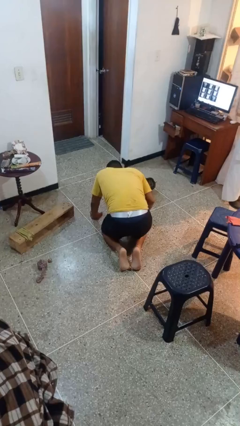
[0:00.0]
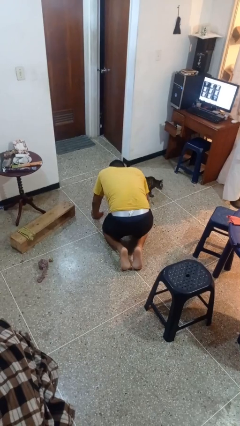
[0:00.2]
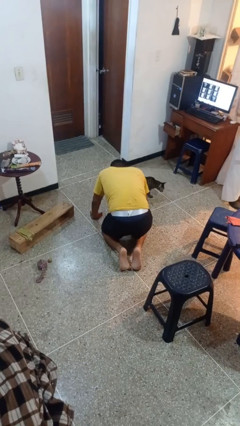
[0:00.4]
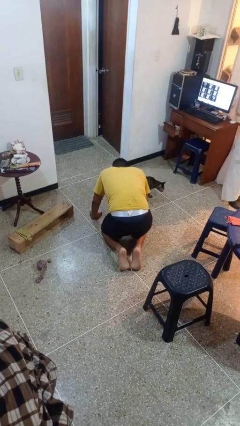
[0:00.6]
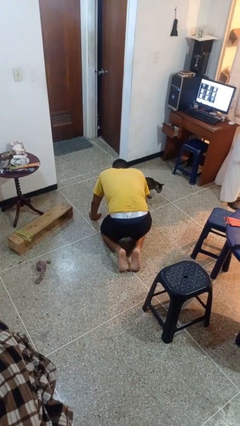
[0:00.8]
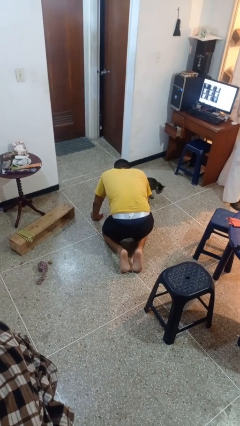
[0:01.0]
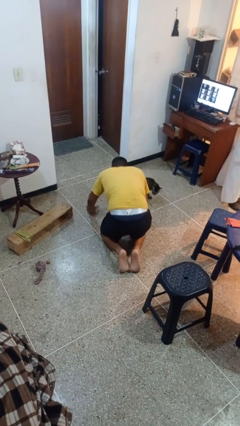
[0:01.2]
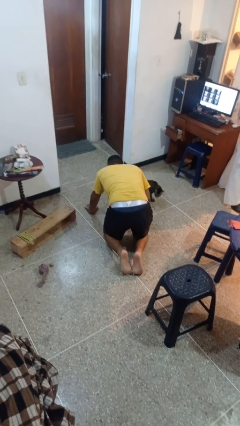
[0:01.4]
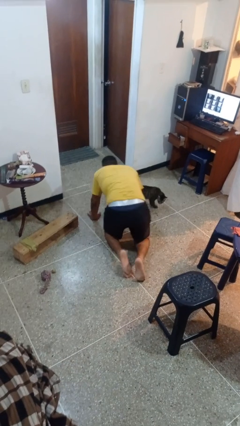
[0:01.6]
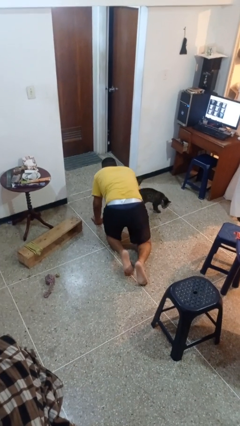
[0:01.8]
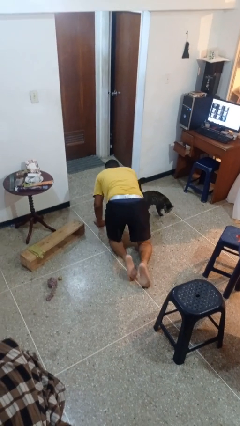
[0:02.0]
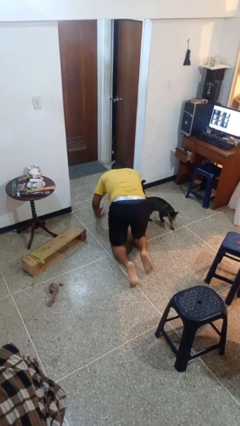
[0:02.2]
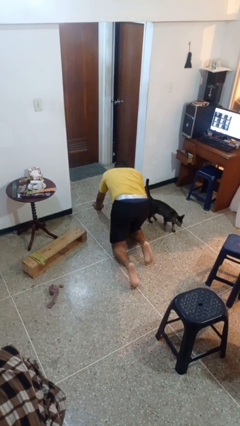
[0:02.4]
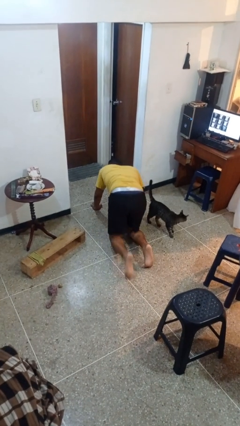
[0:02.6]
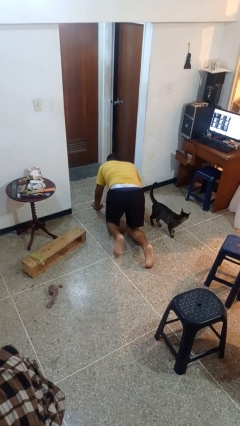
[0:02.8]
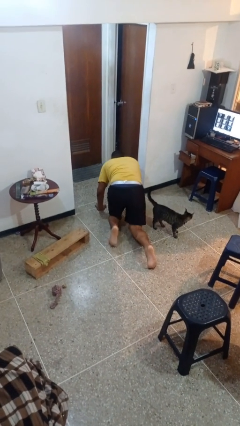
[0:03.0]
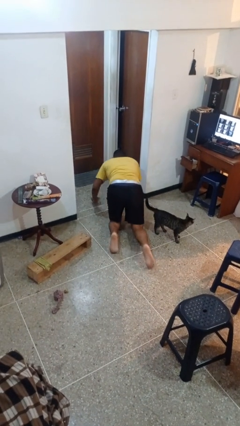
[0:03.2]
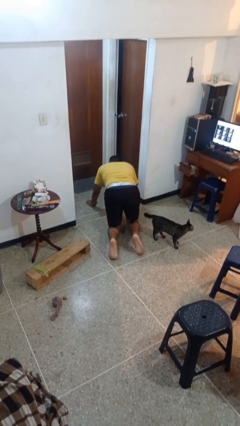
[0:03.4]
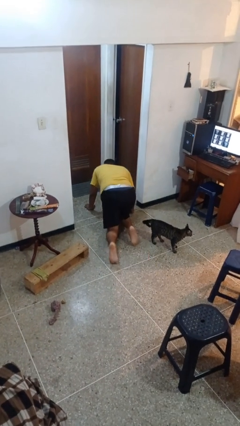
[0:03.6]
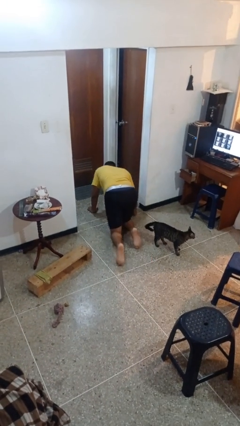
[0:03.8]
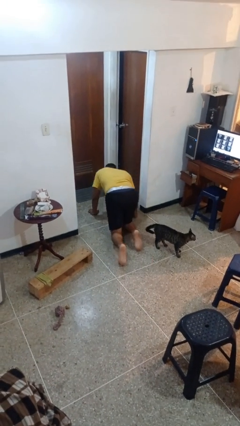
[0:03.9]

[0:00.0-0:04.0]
person crawls

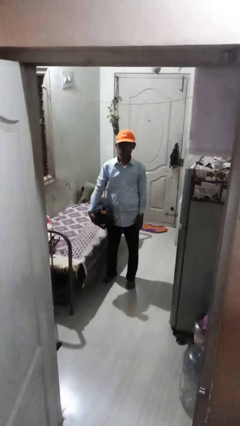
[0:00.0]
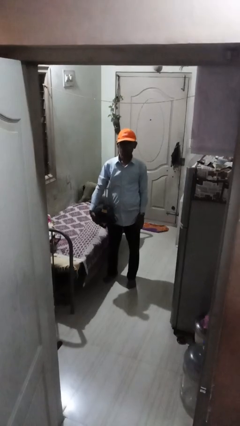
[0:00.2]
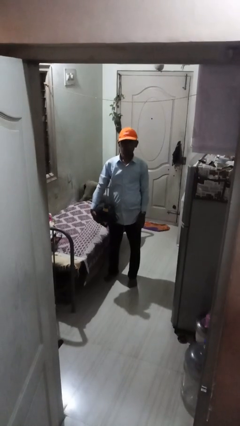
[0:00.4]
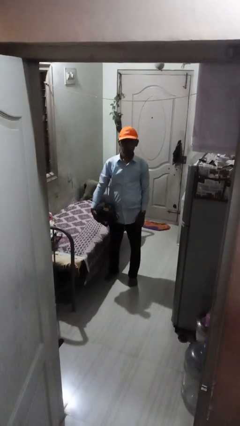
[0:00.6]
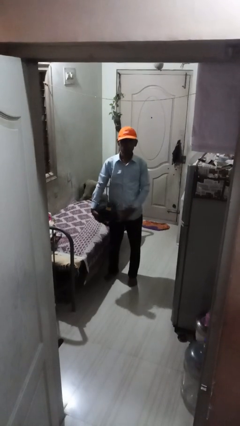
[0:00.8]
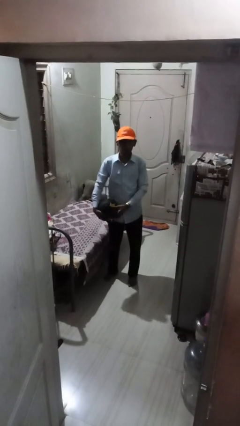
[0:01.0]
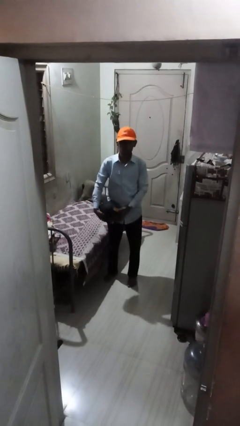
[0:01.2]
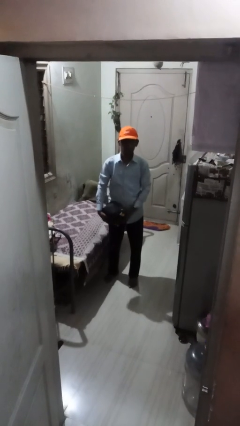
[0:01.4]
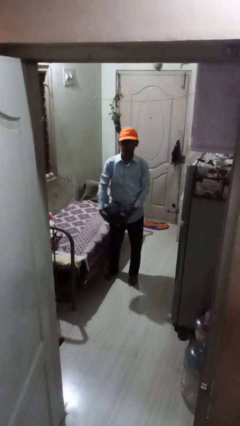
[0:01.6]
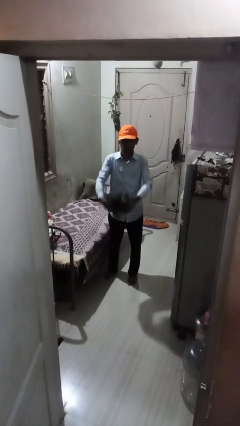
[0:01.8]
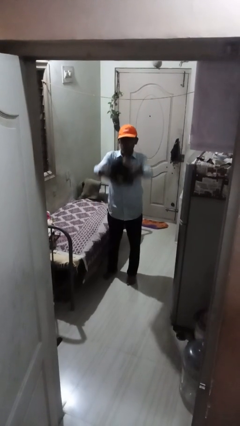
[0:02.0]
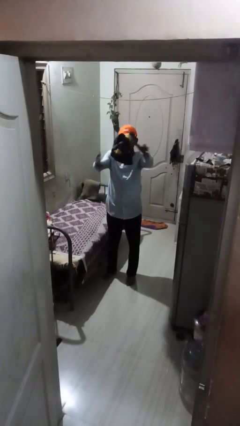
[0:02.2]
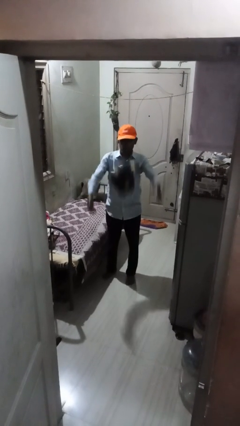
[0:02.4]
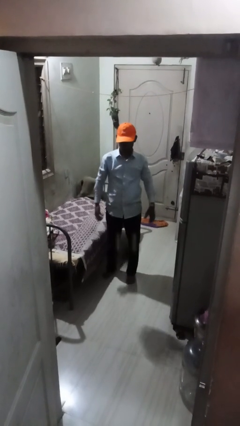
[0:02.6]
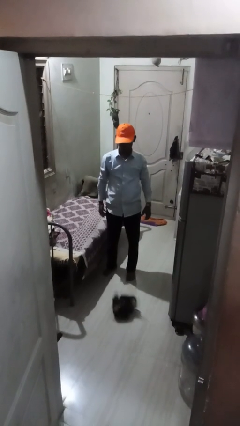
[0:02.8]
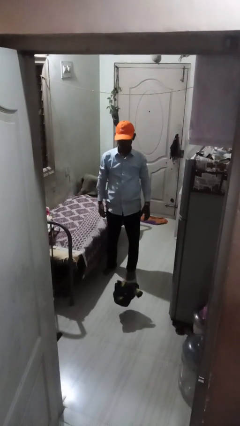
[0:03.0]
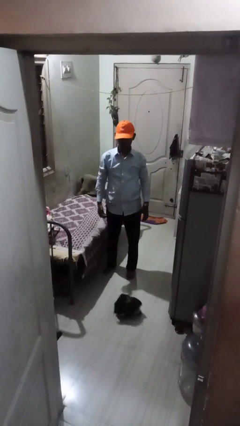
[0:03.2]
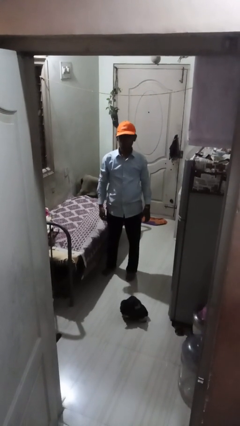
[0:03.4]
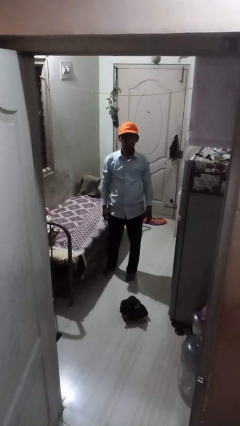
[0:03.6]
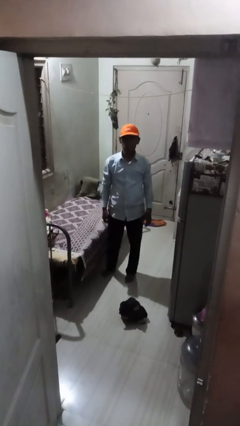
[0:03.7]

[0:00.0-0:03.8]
person throws object into air

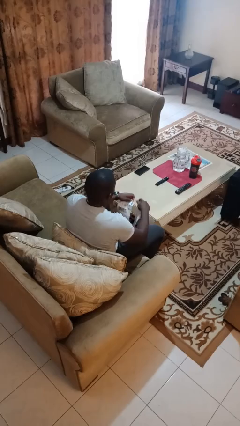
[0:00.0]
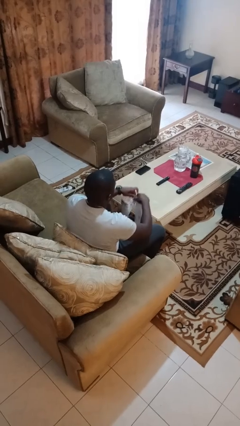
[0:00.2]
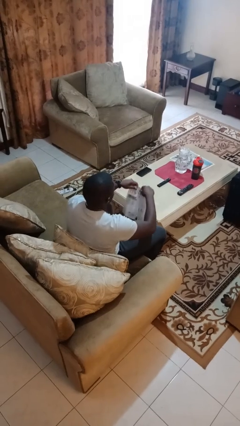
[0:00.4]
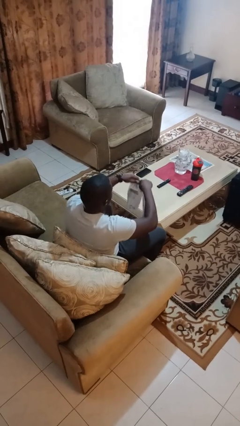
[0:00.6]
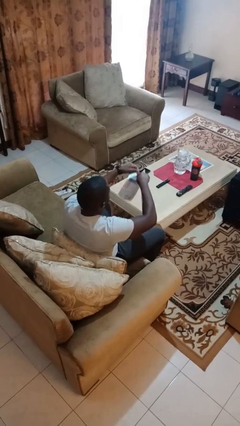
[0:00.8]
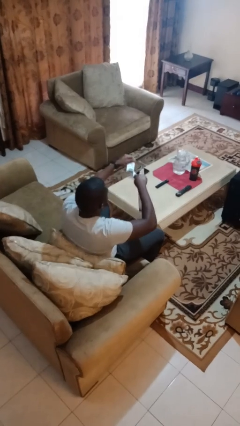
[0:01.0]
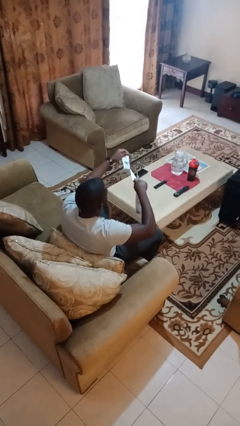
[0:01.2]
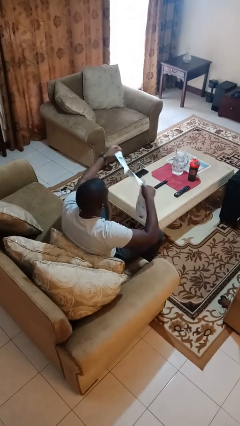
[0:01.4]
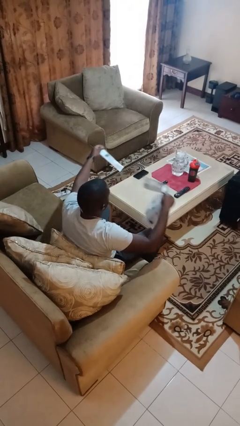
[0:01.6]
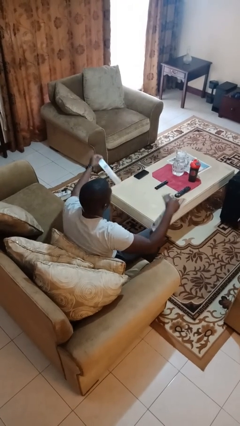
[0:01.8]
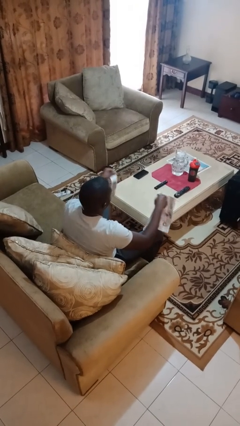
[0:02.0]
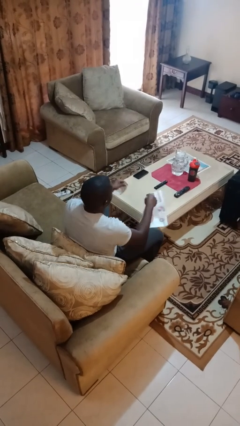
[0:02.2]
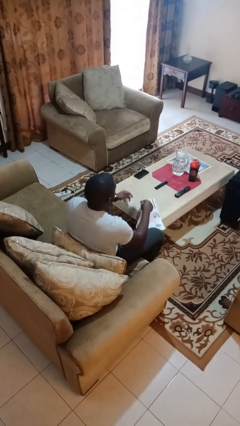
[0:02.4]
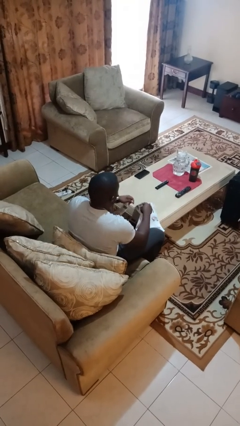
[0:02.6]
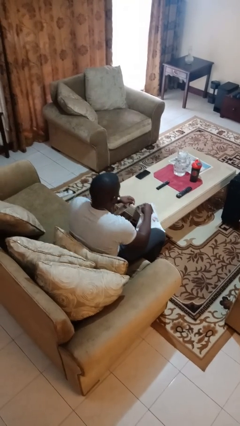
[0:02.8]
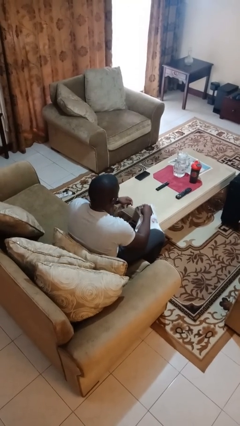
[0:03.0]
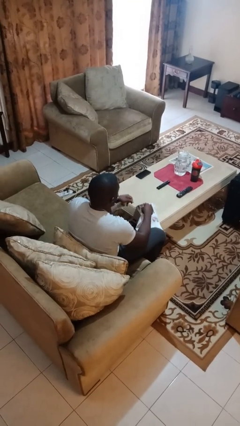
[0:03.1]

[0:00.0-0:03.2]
person tears paper

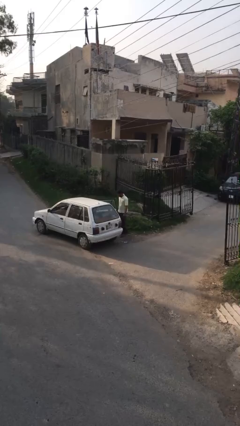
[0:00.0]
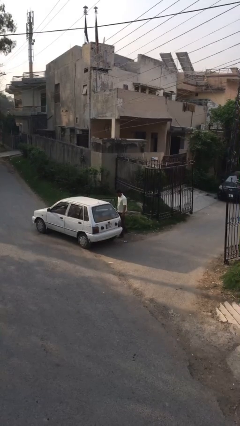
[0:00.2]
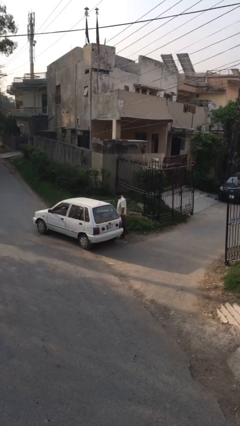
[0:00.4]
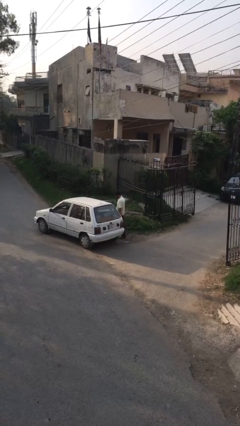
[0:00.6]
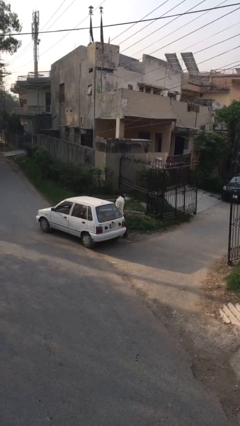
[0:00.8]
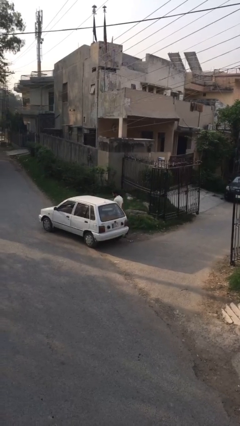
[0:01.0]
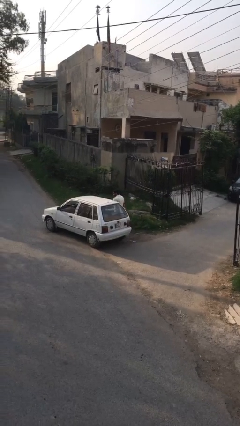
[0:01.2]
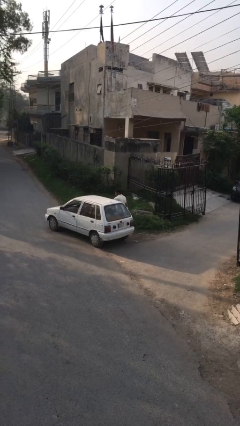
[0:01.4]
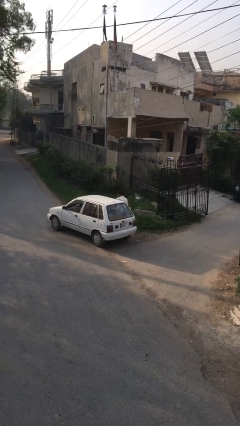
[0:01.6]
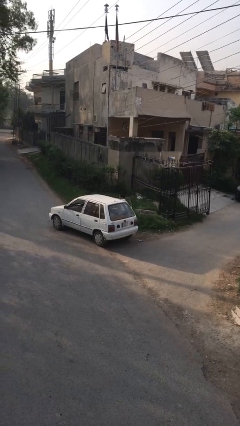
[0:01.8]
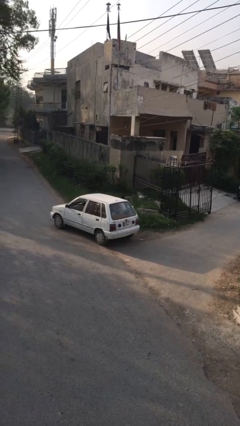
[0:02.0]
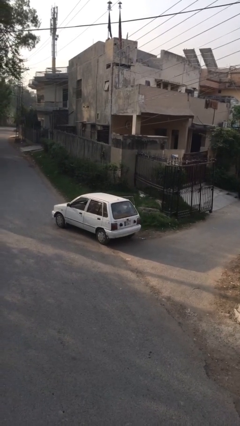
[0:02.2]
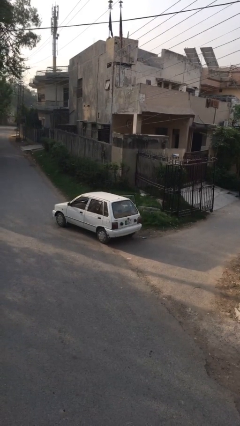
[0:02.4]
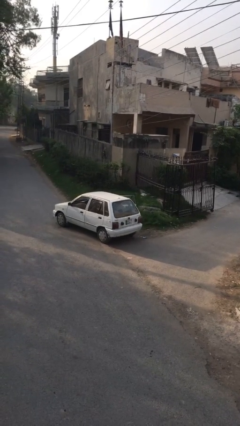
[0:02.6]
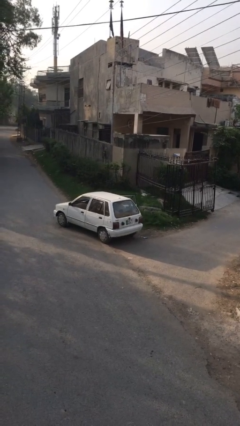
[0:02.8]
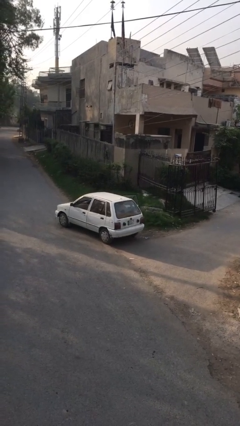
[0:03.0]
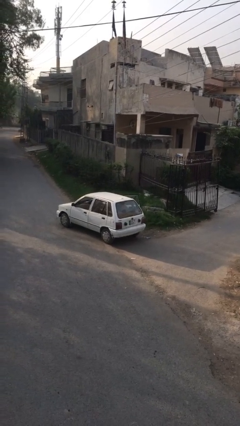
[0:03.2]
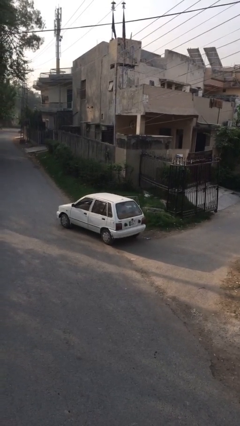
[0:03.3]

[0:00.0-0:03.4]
person enters car

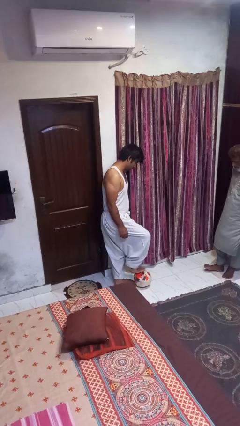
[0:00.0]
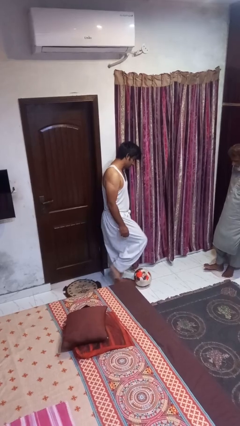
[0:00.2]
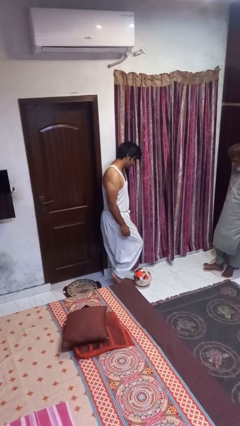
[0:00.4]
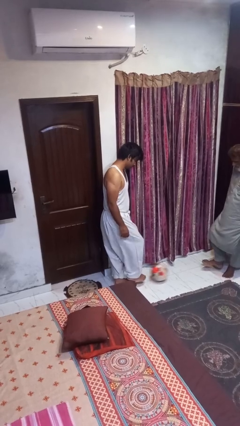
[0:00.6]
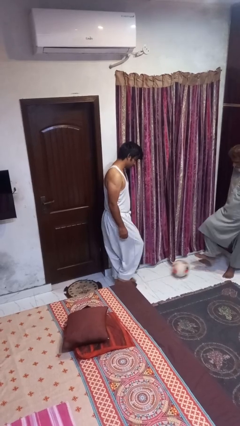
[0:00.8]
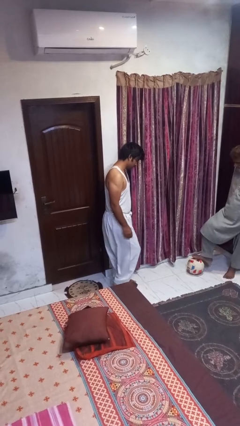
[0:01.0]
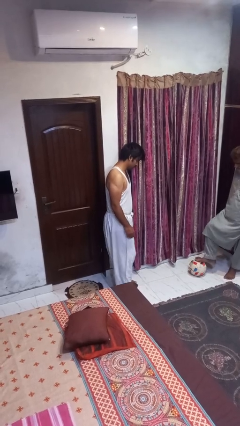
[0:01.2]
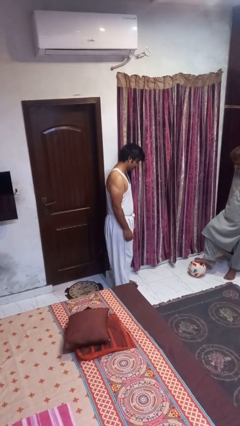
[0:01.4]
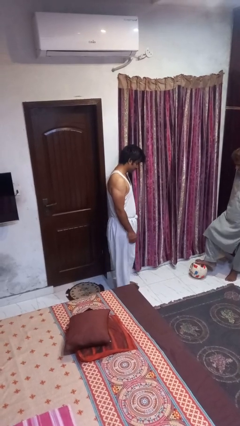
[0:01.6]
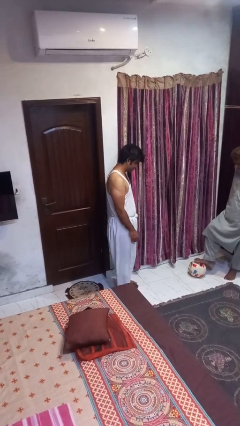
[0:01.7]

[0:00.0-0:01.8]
person kicks object to person

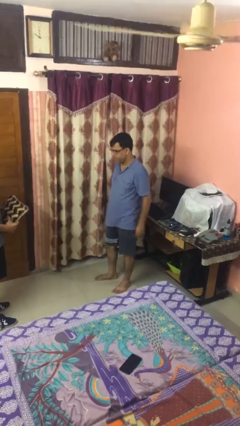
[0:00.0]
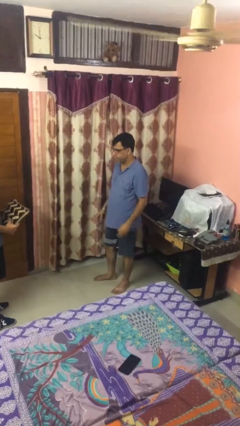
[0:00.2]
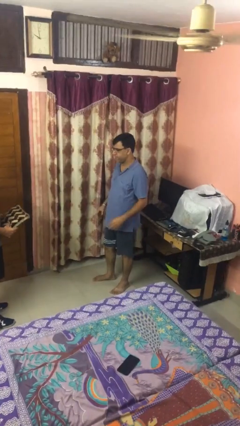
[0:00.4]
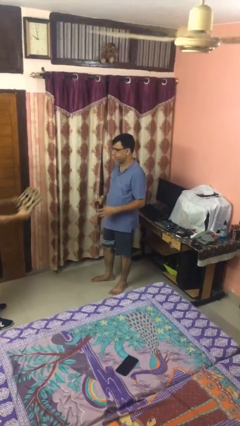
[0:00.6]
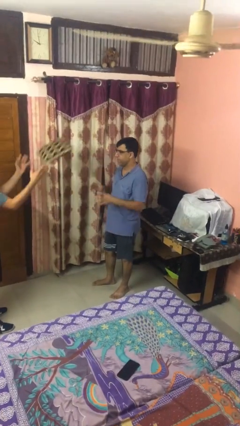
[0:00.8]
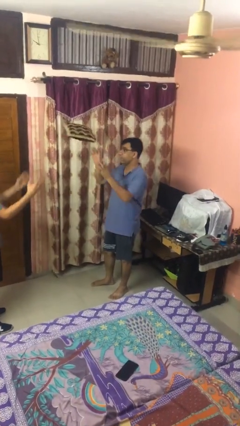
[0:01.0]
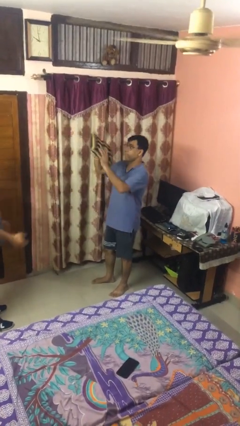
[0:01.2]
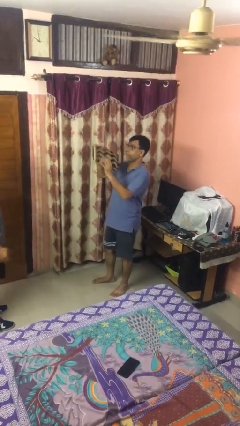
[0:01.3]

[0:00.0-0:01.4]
person catches object from person
